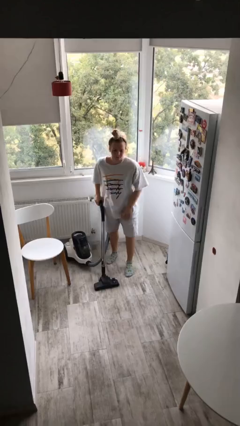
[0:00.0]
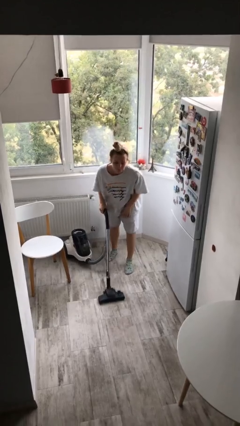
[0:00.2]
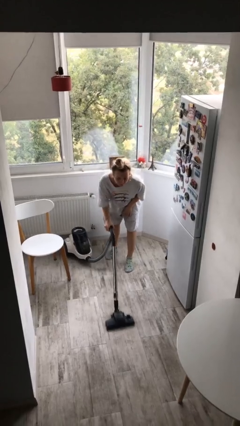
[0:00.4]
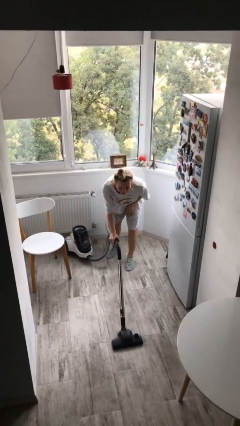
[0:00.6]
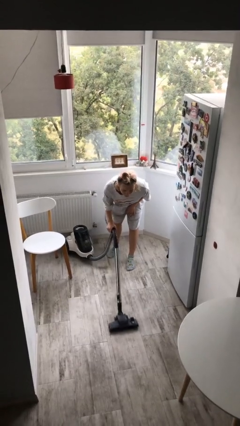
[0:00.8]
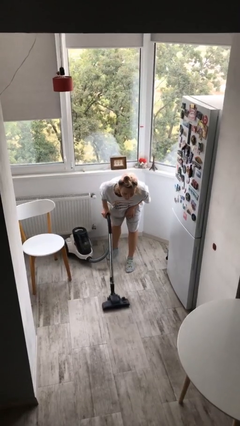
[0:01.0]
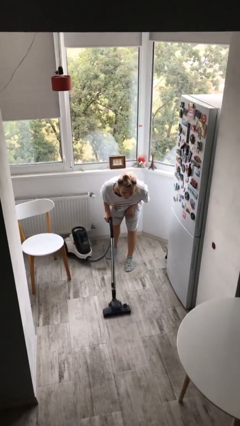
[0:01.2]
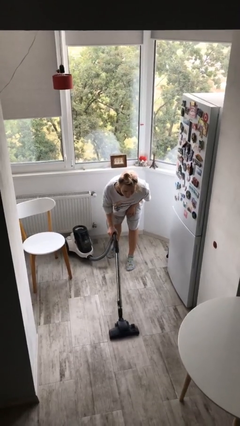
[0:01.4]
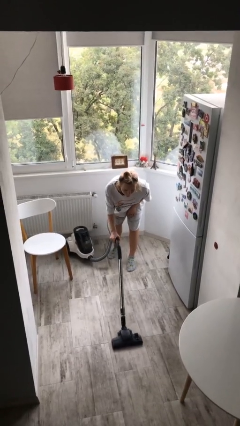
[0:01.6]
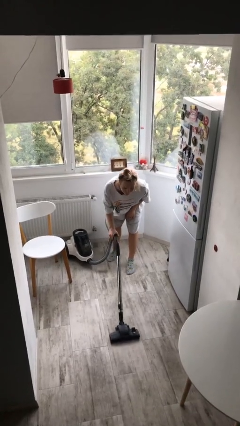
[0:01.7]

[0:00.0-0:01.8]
person vacuums carpet

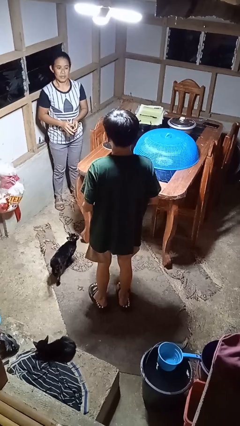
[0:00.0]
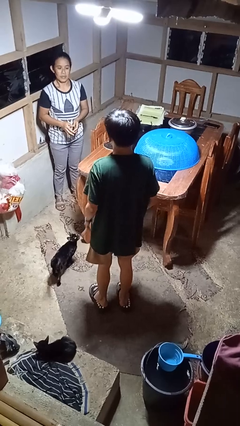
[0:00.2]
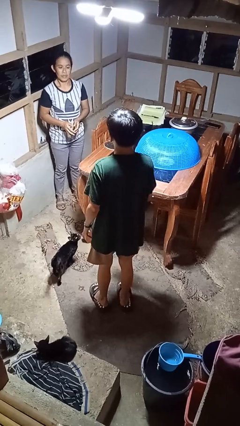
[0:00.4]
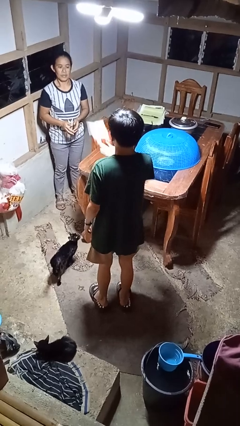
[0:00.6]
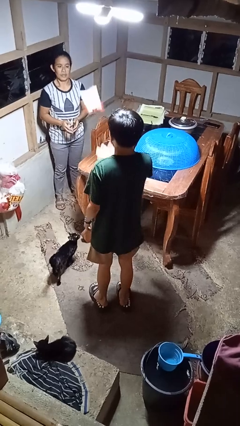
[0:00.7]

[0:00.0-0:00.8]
person throws object to person

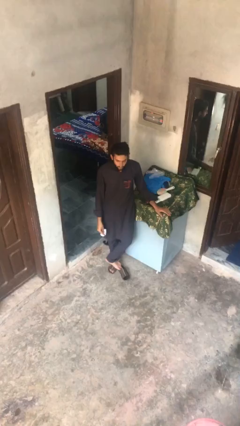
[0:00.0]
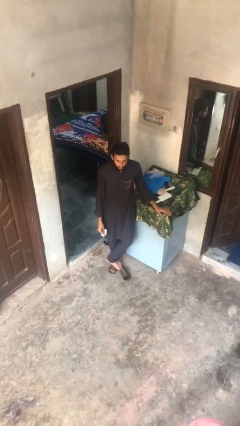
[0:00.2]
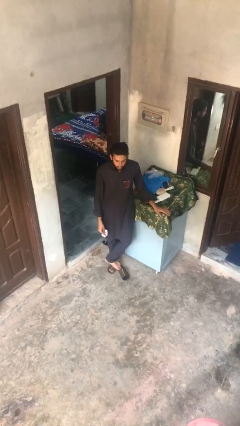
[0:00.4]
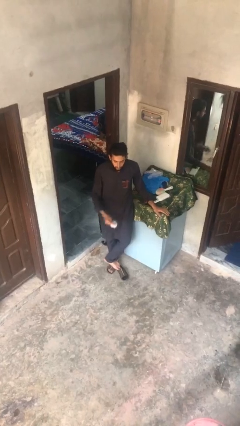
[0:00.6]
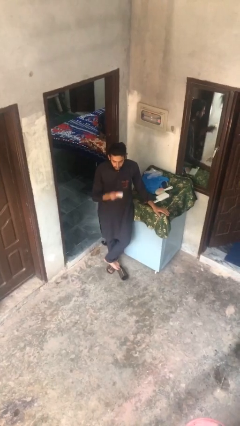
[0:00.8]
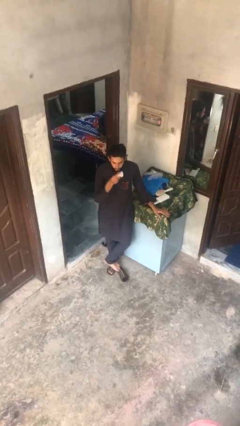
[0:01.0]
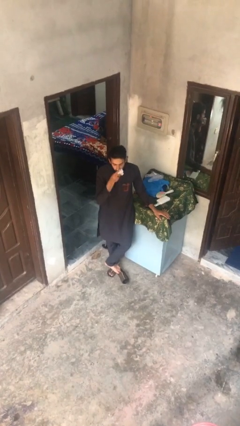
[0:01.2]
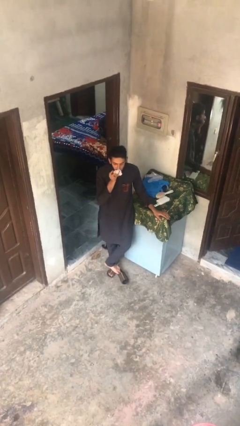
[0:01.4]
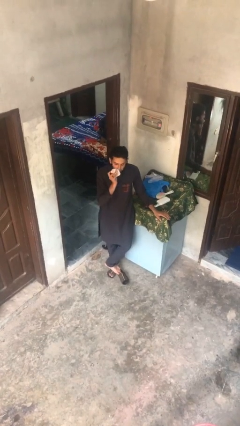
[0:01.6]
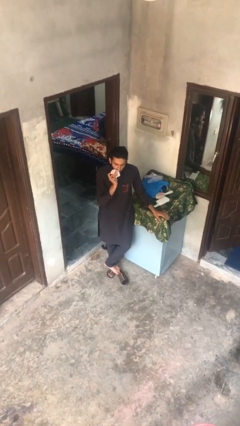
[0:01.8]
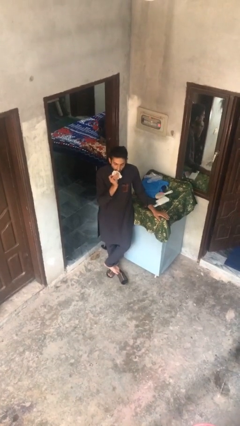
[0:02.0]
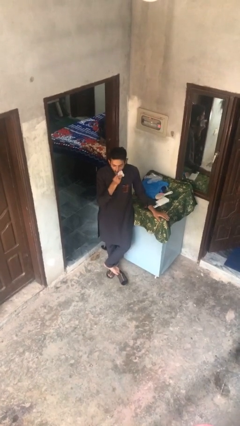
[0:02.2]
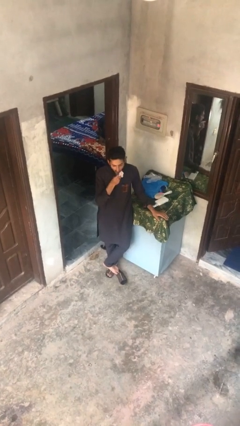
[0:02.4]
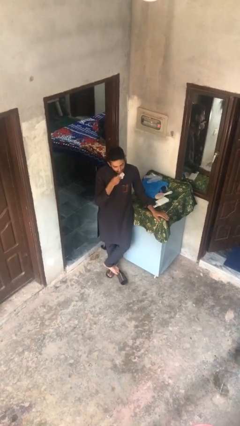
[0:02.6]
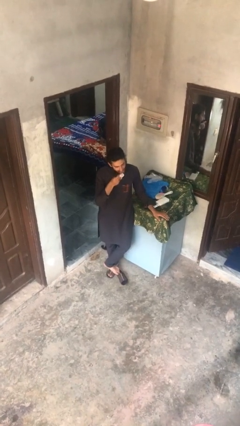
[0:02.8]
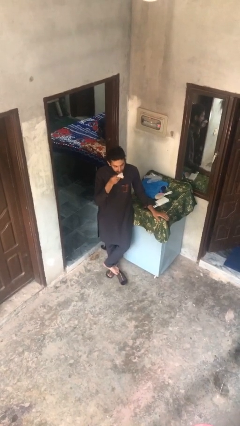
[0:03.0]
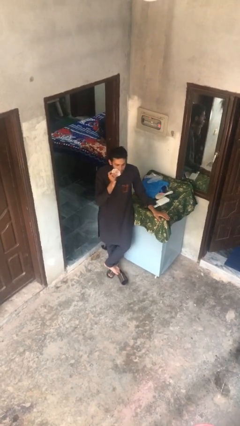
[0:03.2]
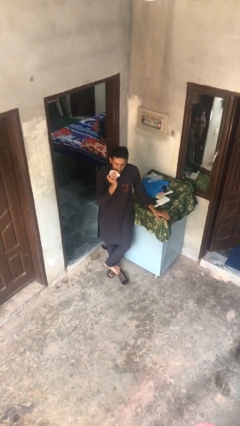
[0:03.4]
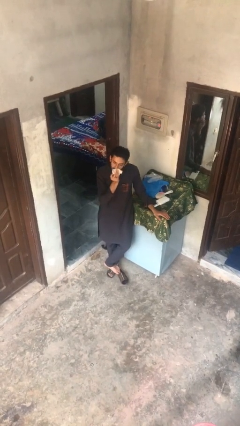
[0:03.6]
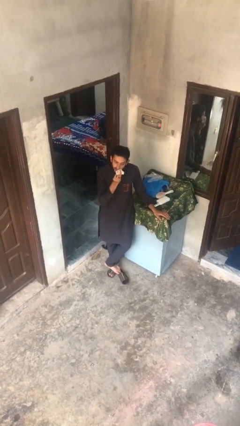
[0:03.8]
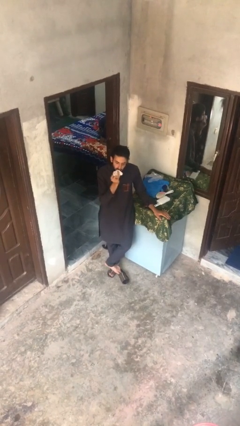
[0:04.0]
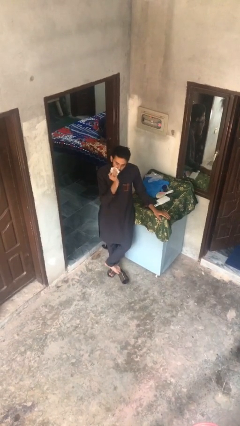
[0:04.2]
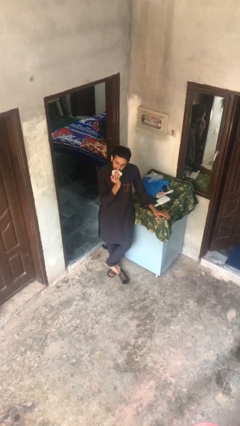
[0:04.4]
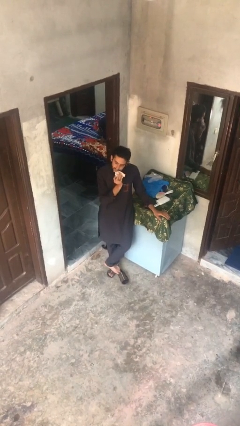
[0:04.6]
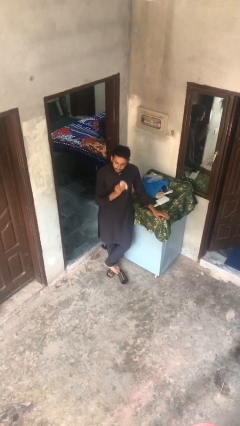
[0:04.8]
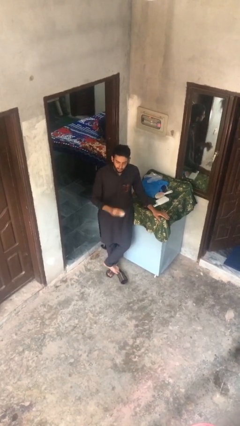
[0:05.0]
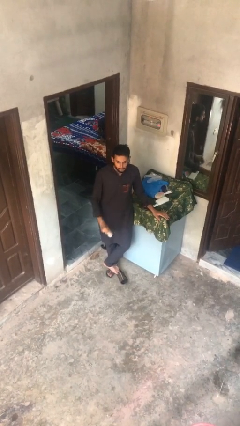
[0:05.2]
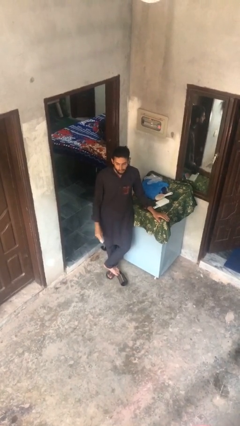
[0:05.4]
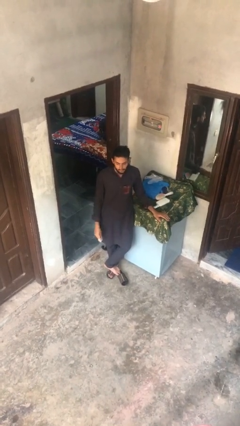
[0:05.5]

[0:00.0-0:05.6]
person wipes mouth with napkin

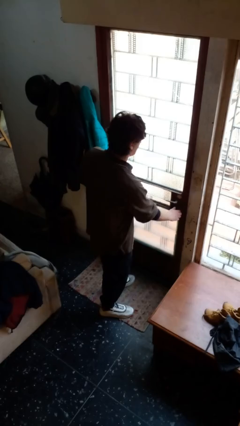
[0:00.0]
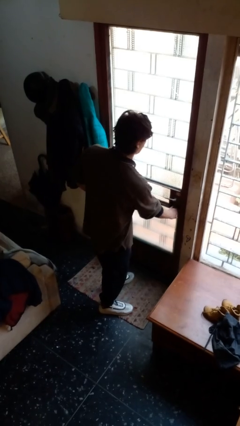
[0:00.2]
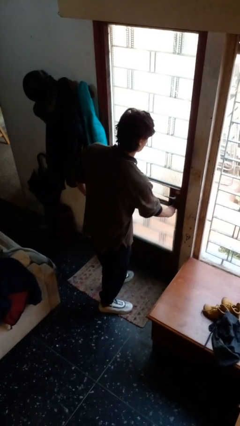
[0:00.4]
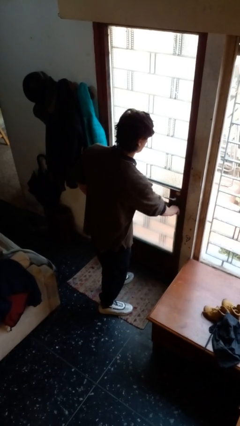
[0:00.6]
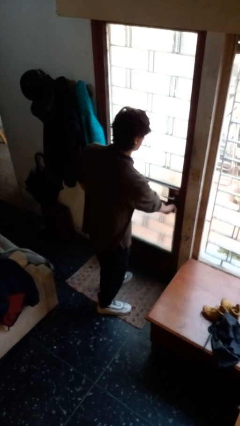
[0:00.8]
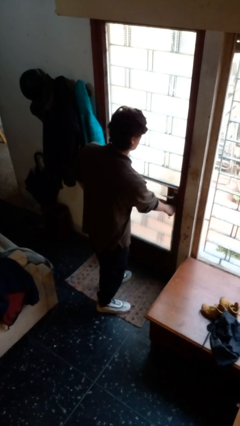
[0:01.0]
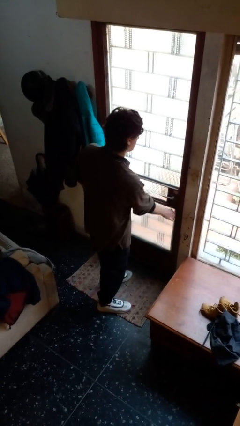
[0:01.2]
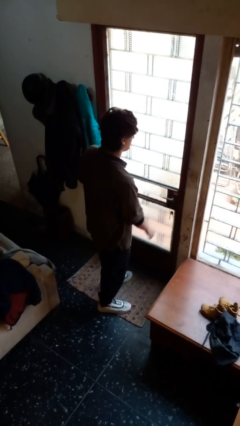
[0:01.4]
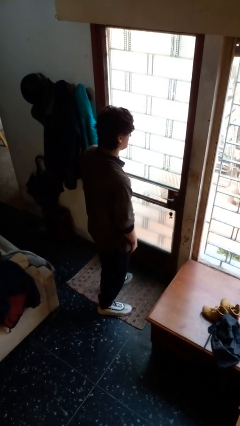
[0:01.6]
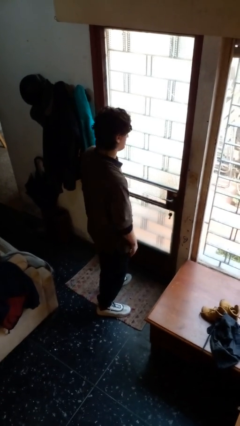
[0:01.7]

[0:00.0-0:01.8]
person unlocks door with keys

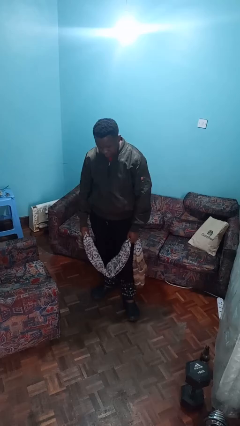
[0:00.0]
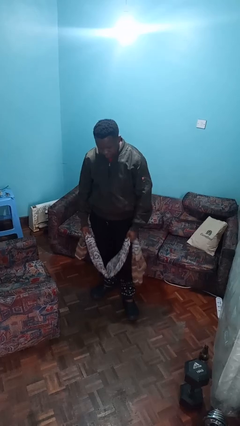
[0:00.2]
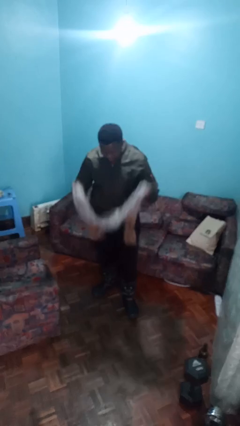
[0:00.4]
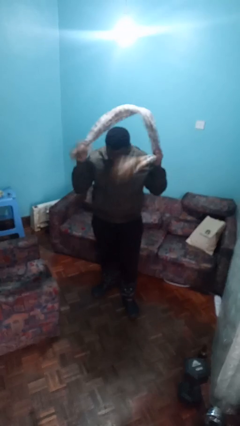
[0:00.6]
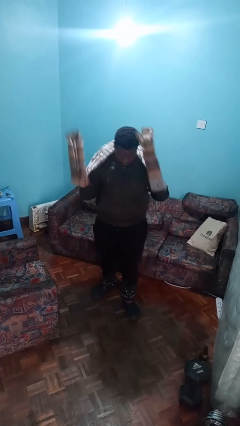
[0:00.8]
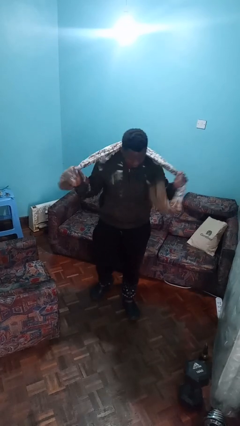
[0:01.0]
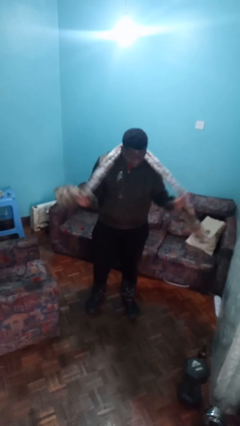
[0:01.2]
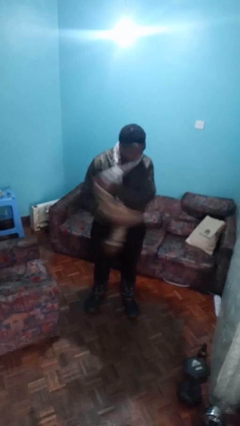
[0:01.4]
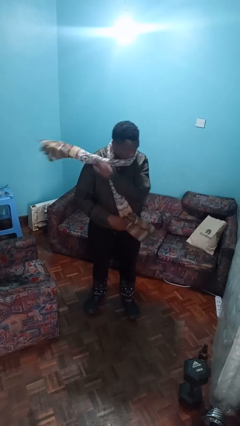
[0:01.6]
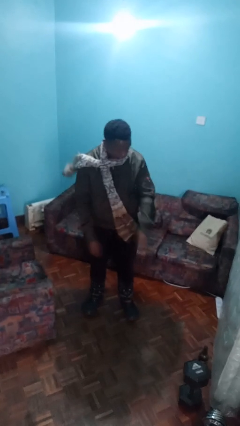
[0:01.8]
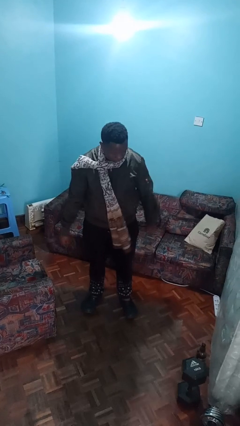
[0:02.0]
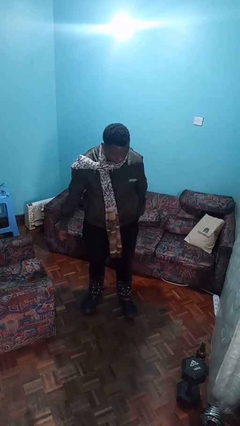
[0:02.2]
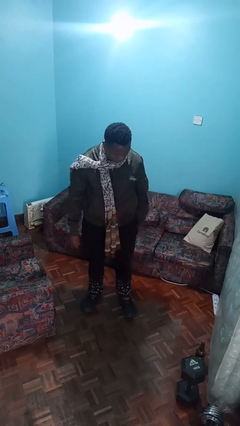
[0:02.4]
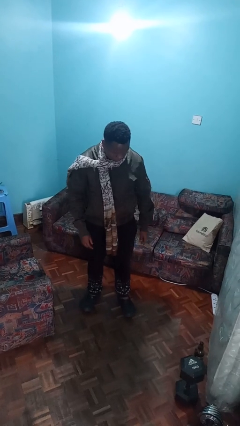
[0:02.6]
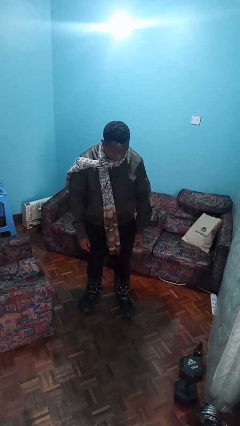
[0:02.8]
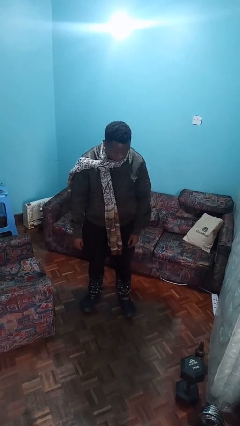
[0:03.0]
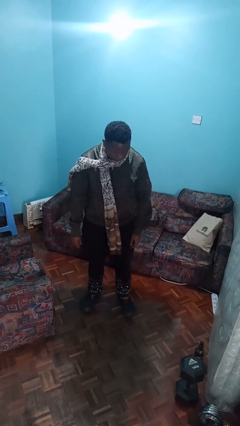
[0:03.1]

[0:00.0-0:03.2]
person puts on scarf

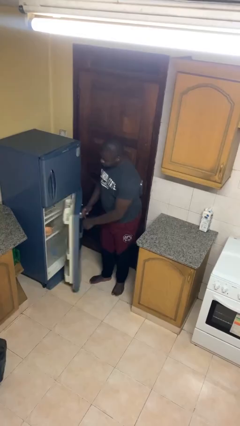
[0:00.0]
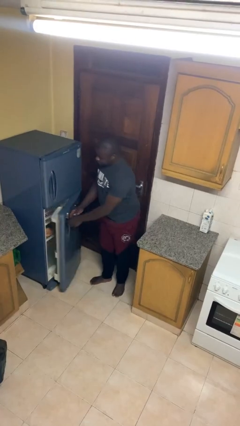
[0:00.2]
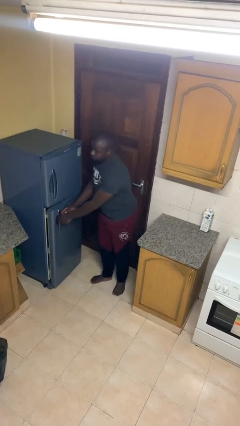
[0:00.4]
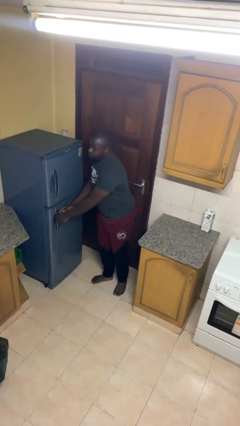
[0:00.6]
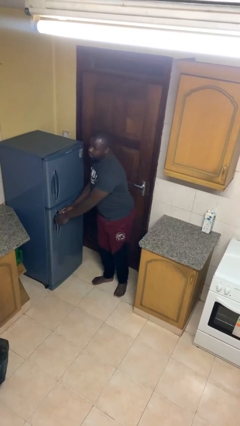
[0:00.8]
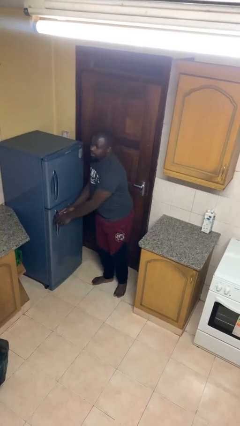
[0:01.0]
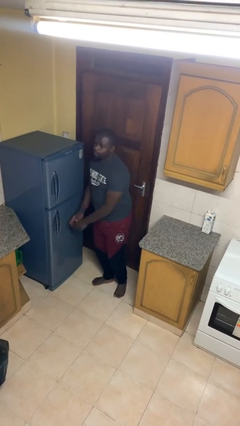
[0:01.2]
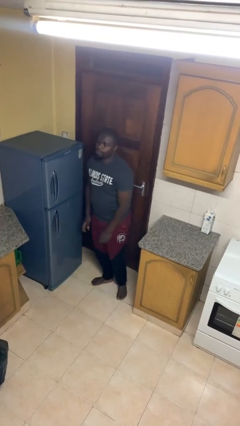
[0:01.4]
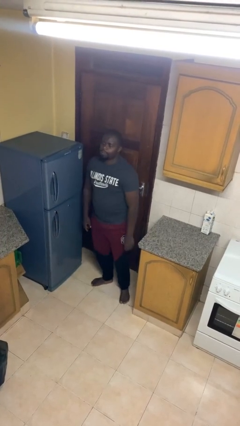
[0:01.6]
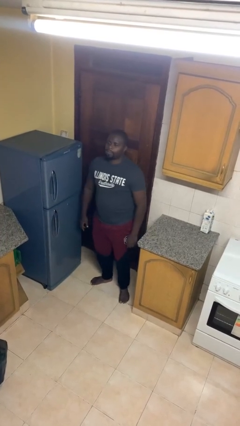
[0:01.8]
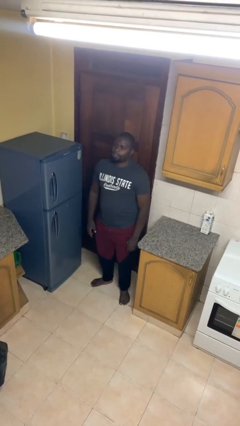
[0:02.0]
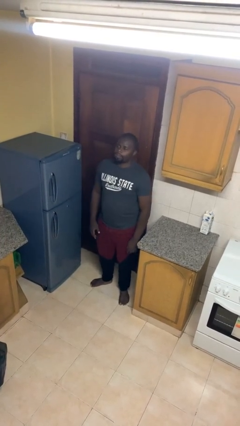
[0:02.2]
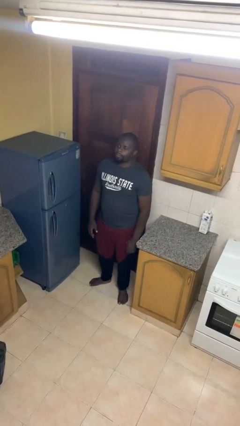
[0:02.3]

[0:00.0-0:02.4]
person closes refrigerator

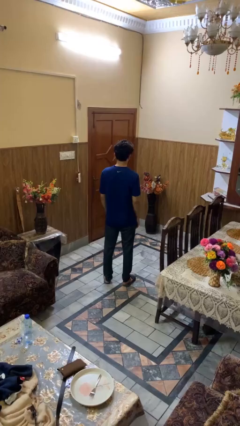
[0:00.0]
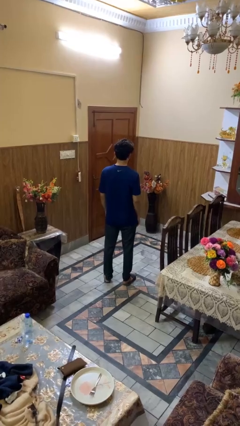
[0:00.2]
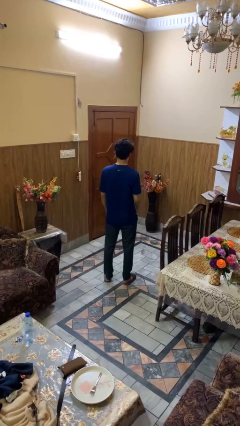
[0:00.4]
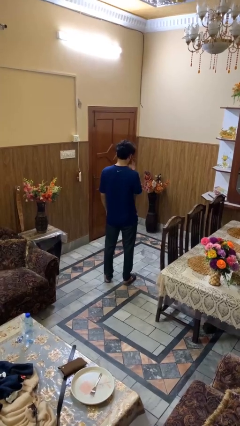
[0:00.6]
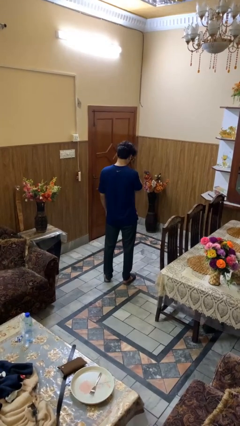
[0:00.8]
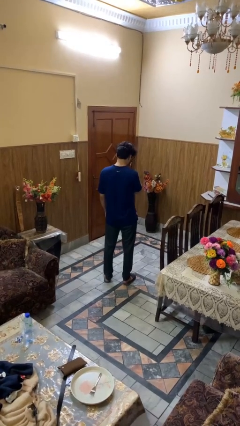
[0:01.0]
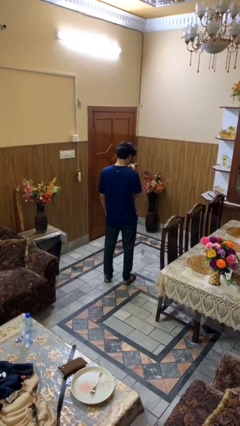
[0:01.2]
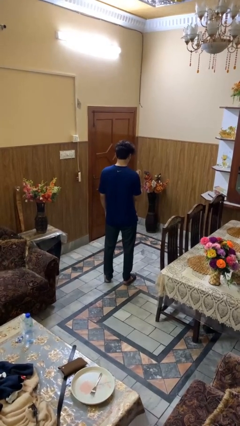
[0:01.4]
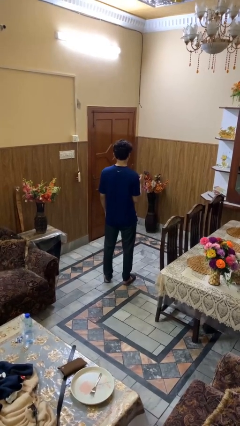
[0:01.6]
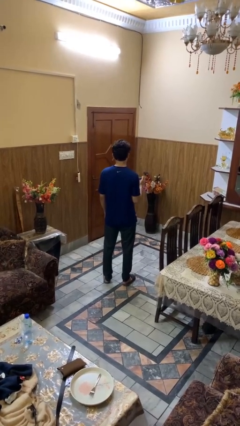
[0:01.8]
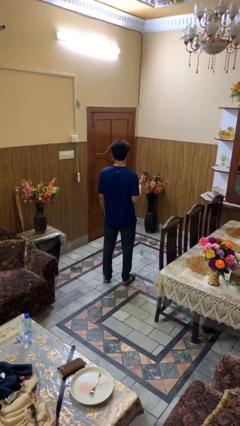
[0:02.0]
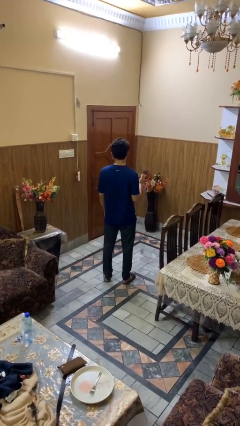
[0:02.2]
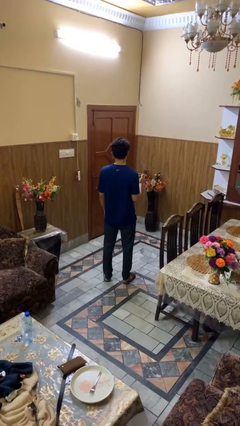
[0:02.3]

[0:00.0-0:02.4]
person takes off sunglasses
